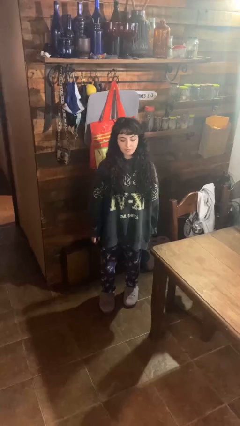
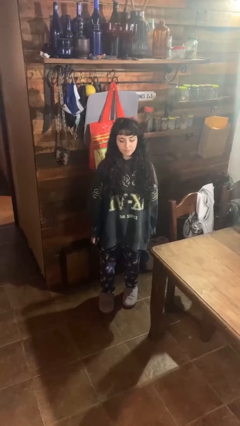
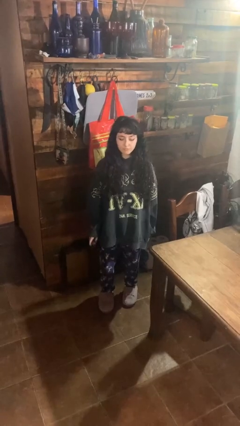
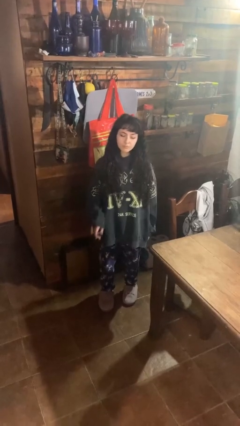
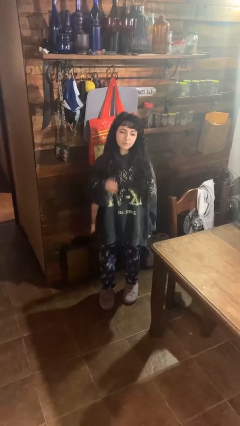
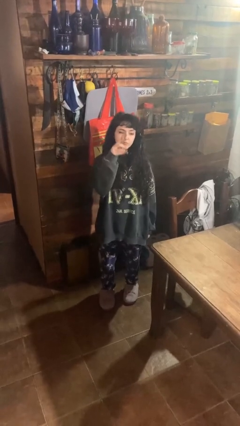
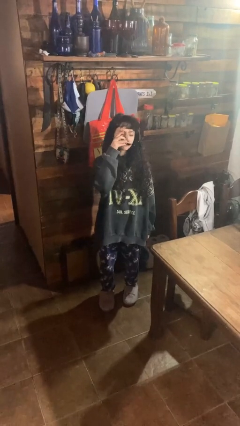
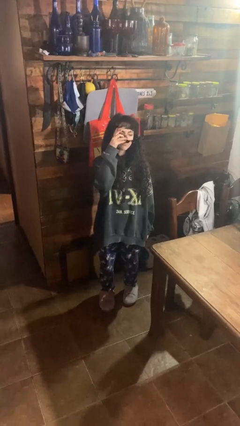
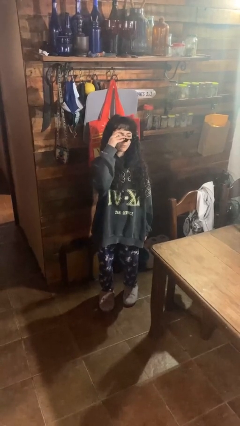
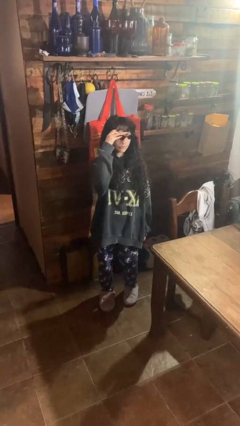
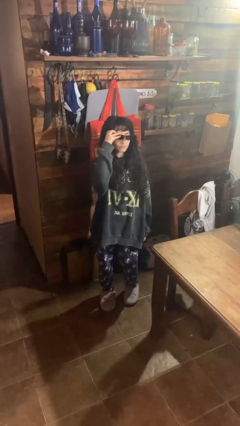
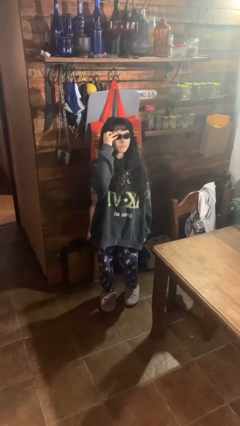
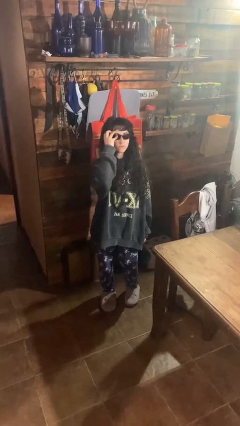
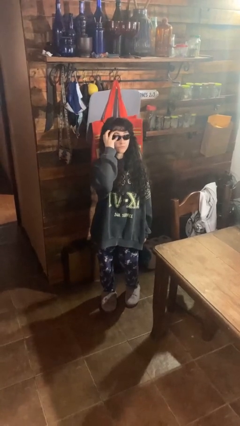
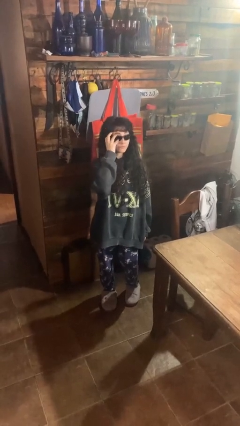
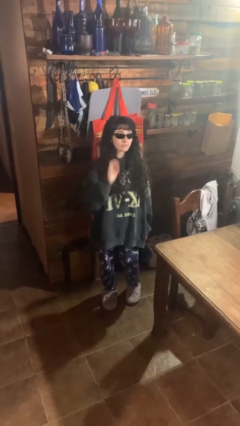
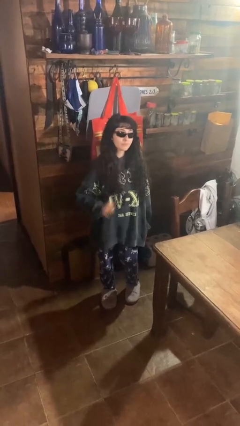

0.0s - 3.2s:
person puts on sunglasses

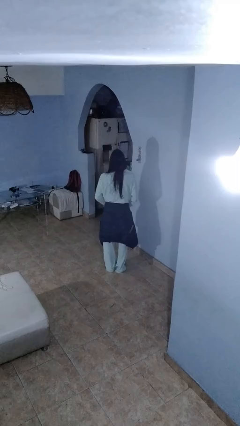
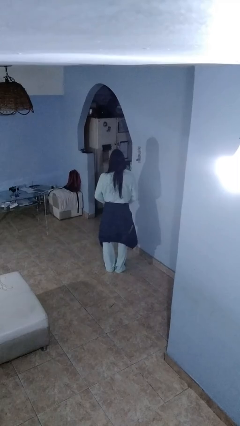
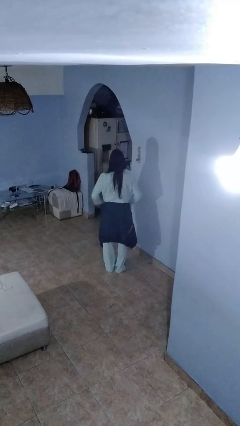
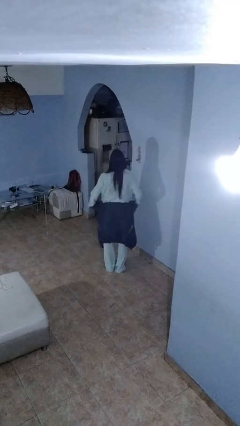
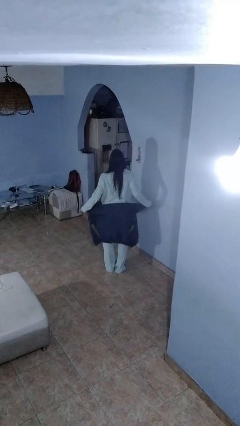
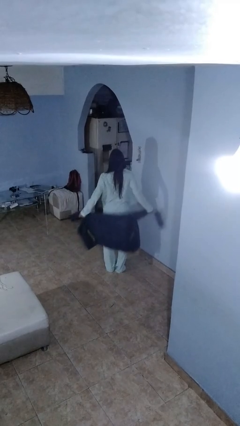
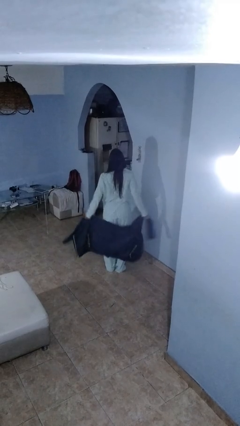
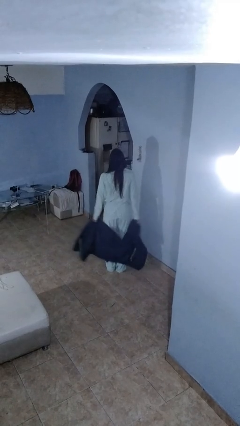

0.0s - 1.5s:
person unties jacket around waist

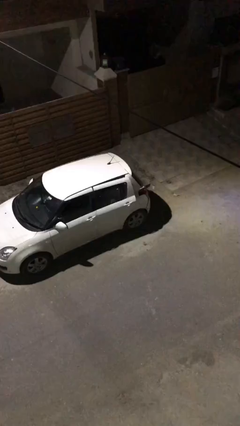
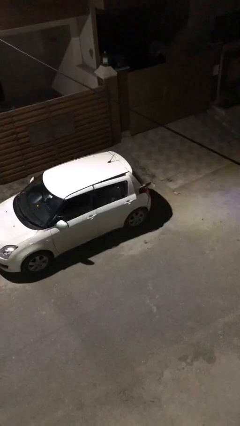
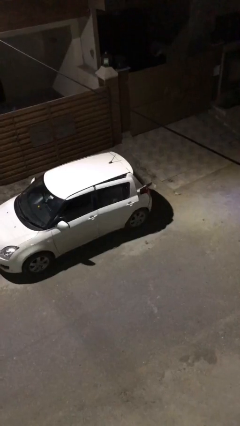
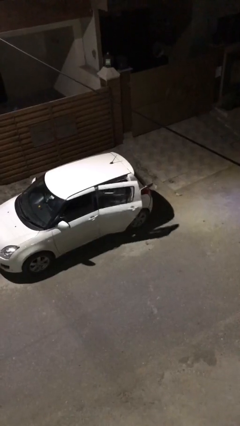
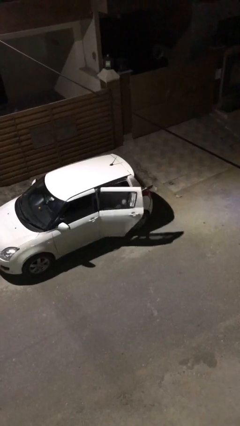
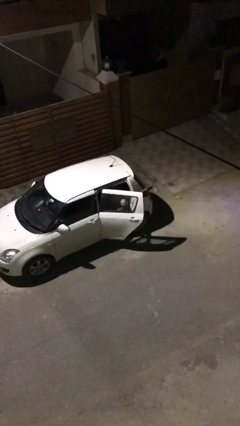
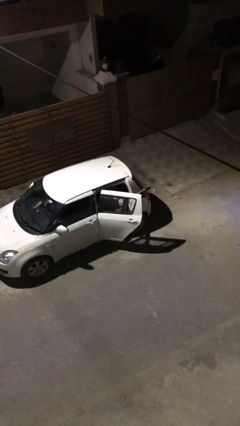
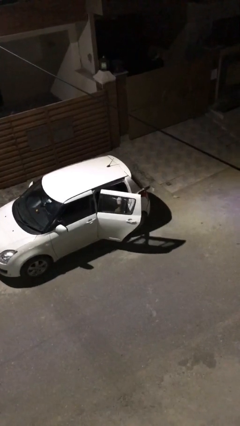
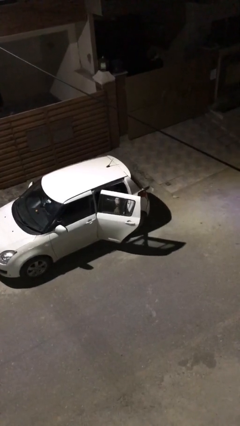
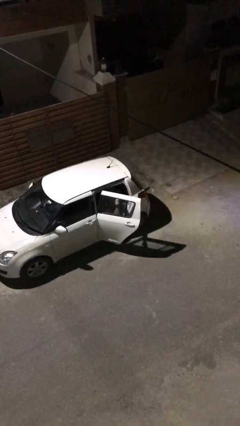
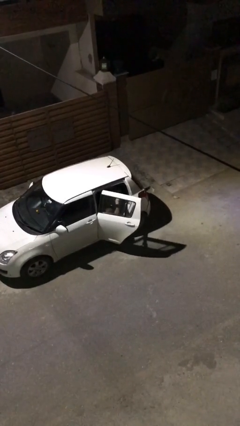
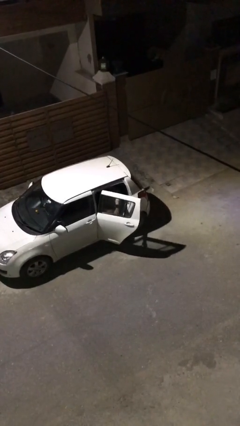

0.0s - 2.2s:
person opens car door

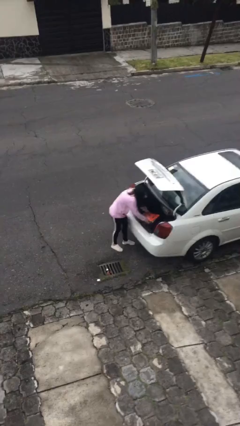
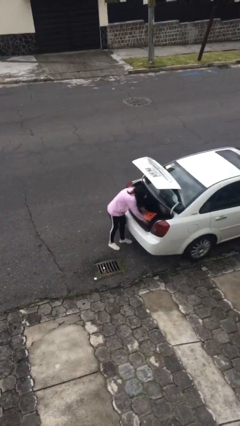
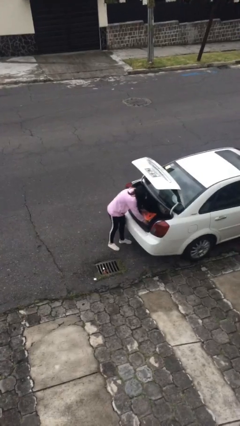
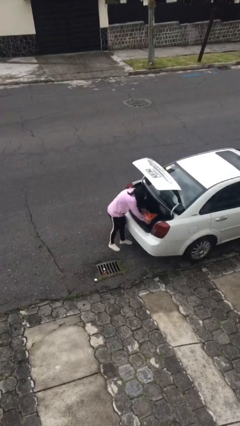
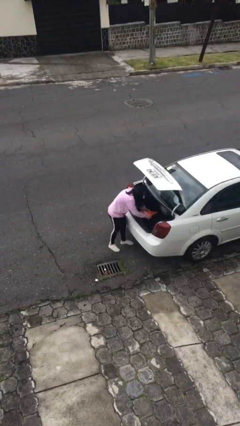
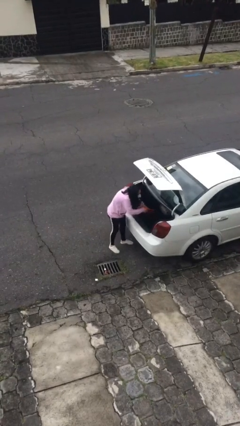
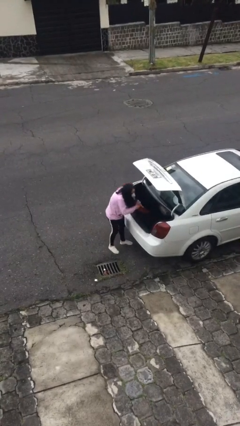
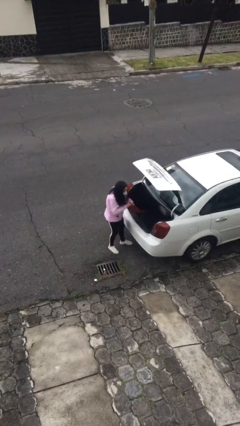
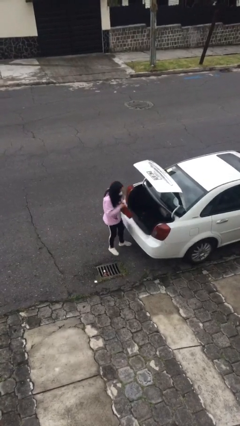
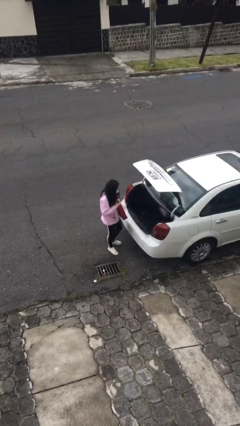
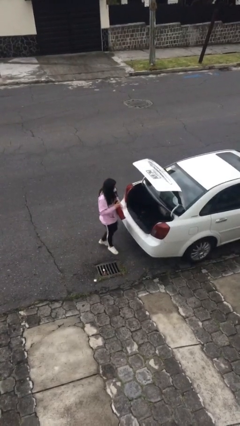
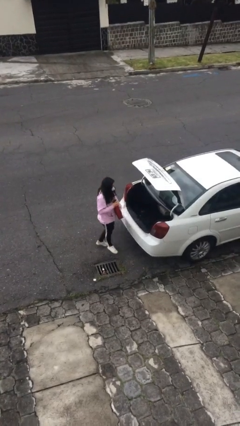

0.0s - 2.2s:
person unloads car

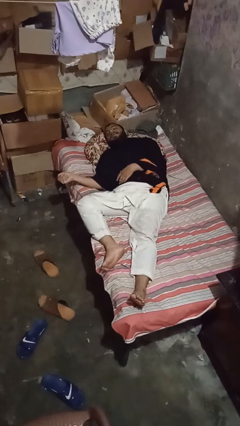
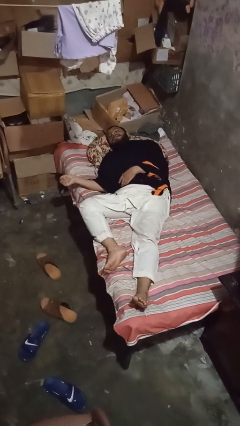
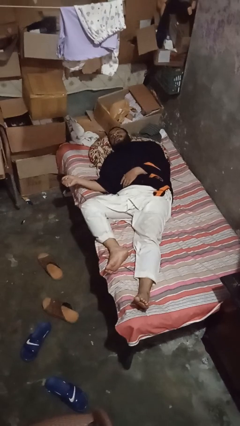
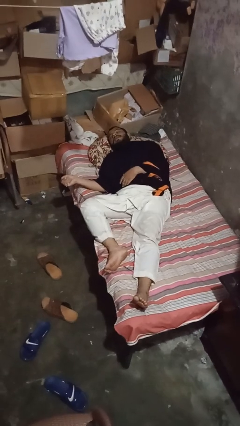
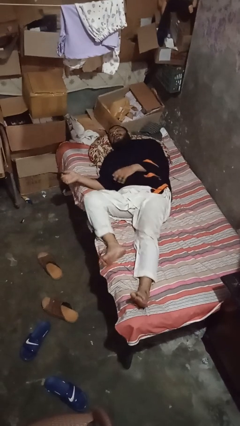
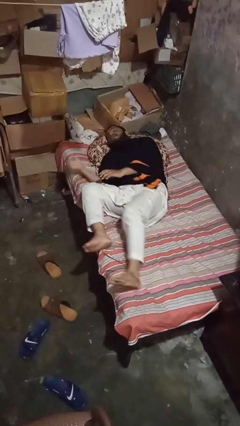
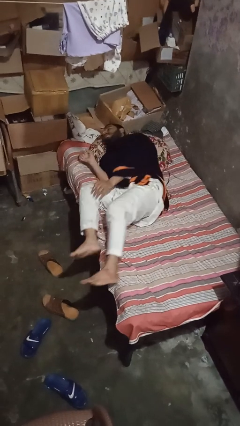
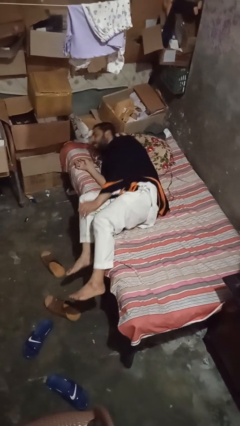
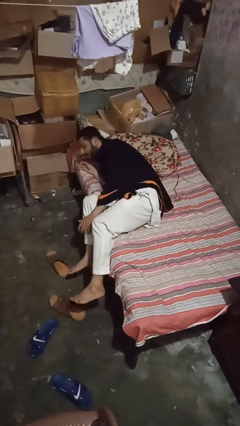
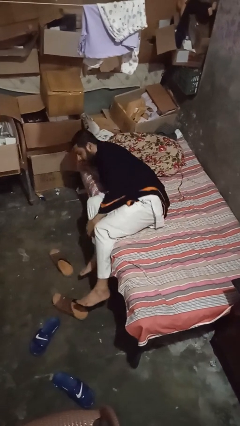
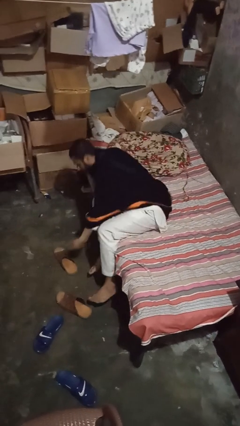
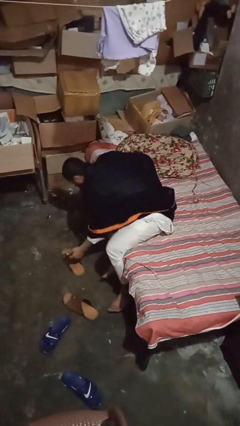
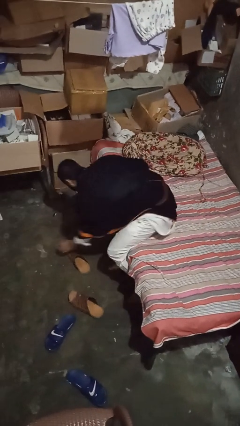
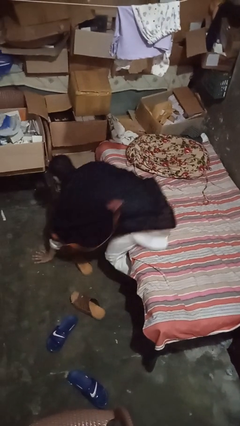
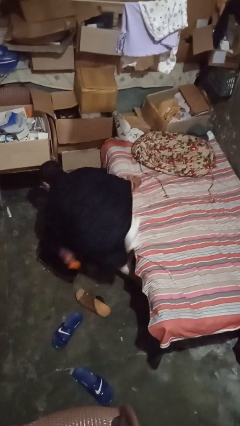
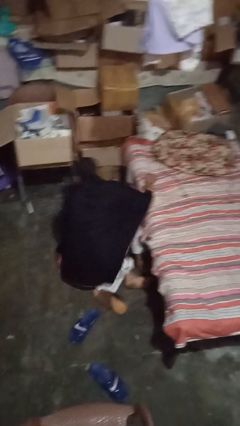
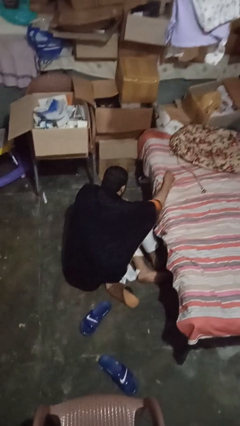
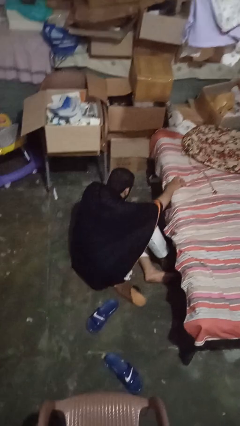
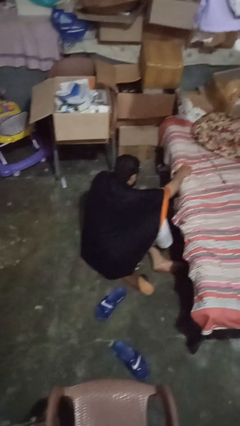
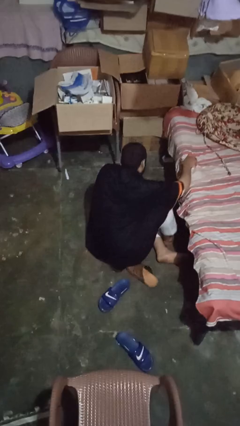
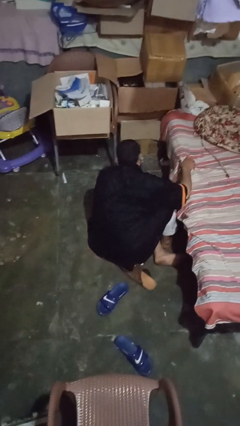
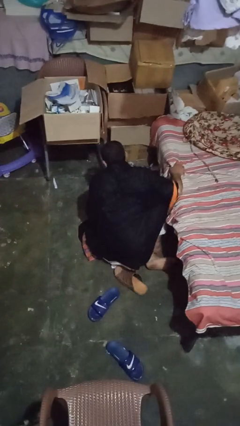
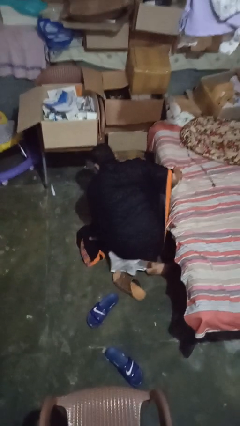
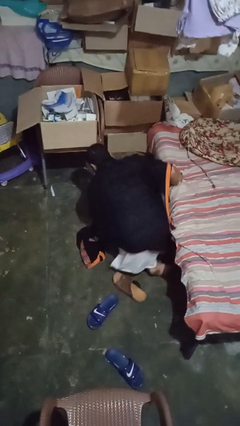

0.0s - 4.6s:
person falls from bed

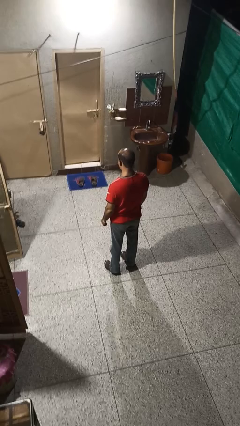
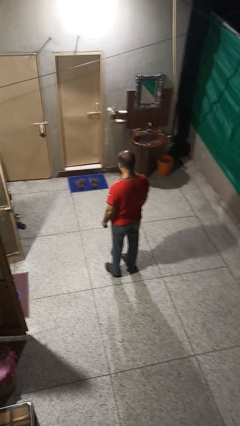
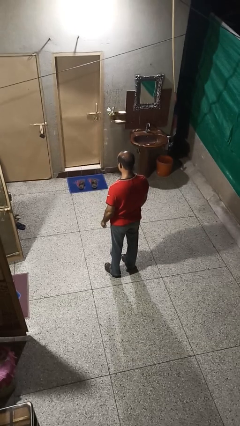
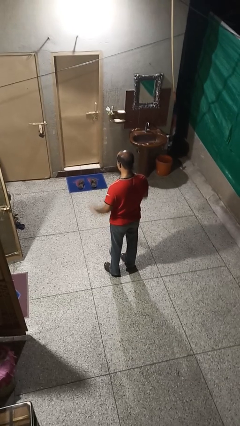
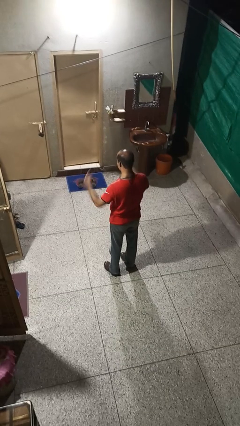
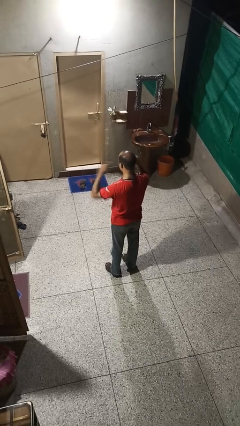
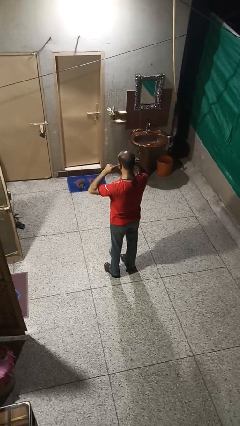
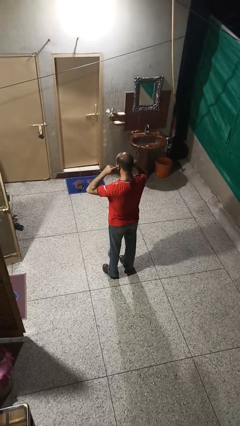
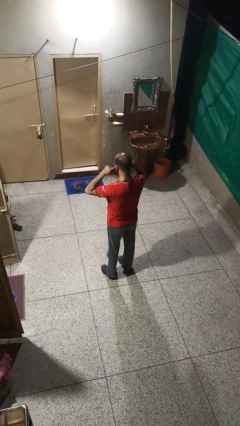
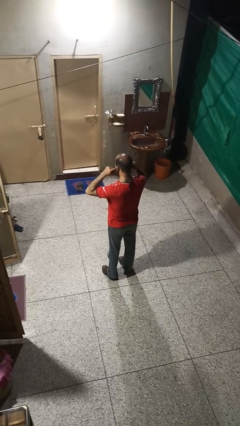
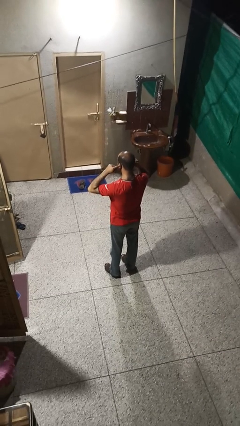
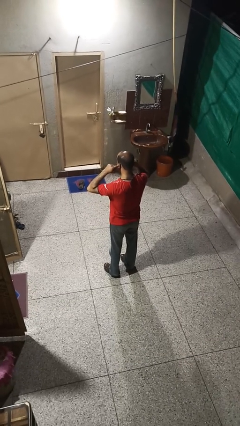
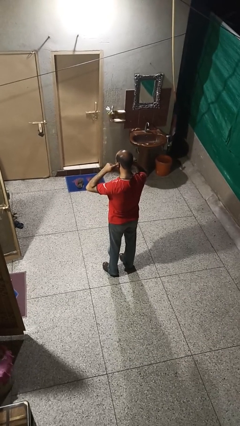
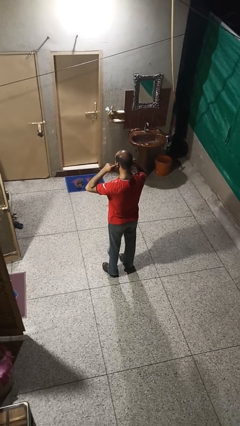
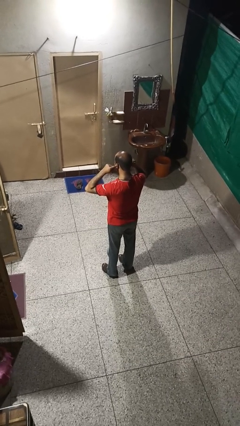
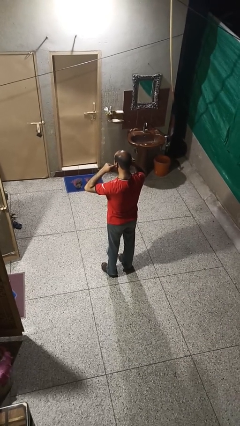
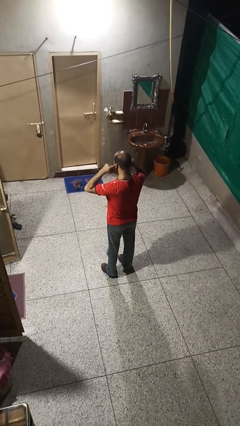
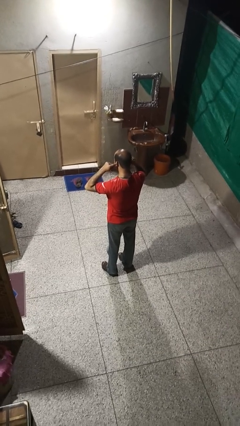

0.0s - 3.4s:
person puts fingers in ear

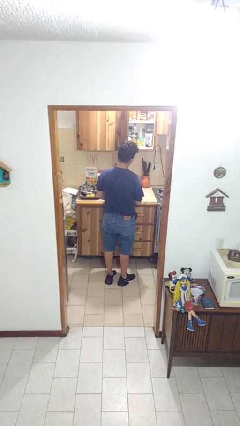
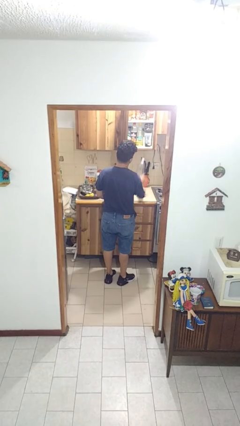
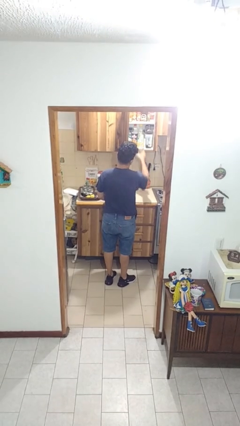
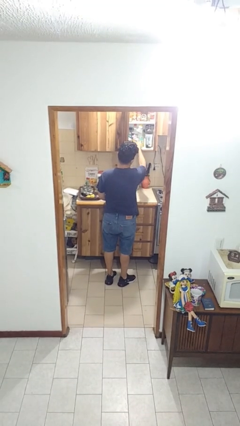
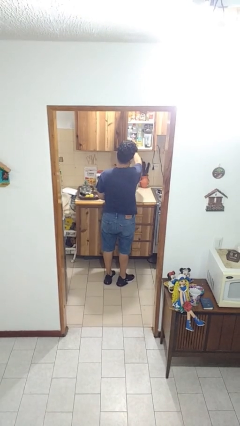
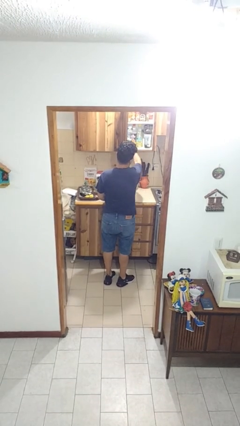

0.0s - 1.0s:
person puts object in cabinet
